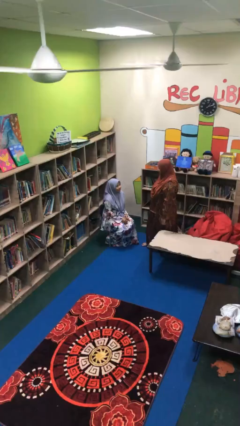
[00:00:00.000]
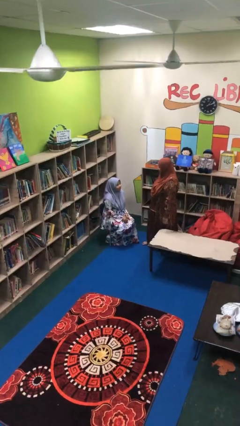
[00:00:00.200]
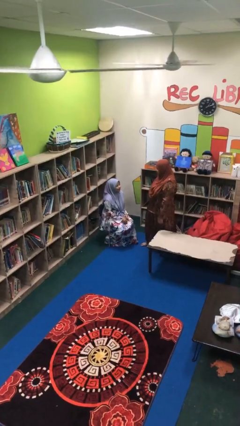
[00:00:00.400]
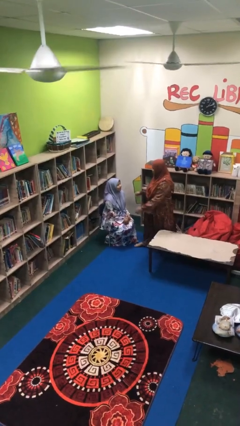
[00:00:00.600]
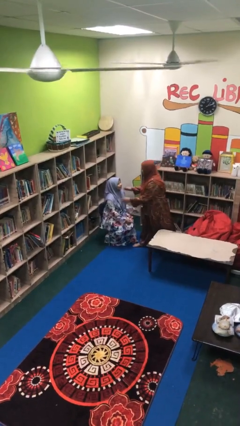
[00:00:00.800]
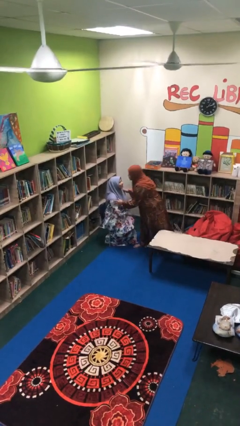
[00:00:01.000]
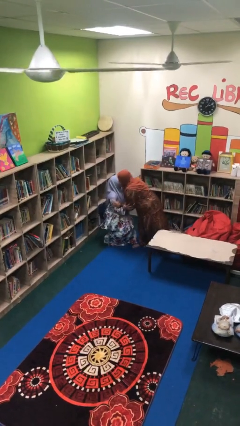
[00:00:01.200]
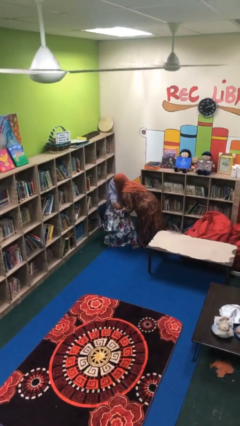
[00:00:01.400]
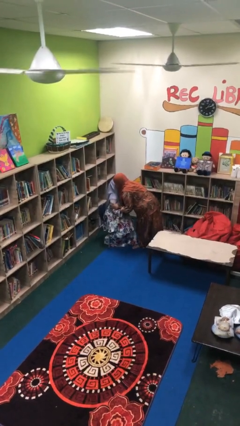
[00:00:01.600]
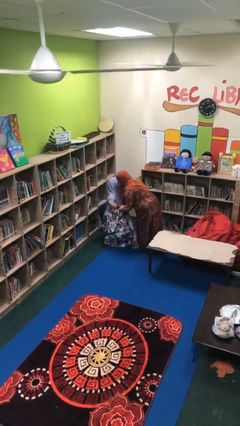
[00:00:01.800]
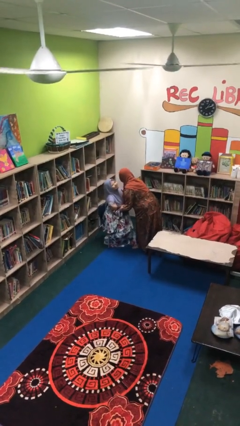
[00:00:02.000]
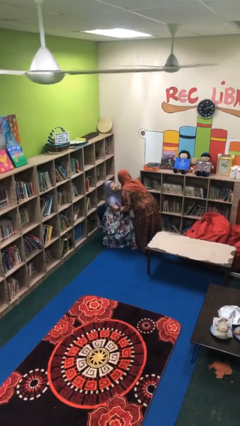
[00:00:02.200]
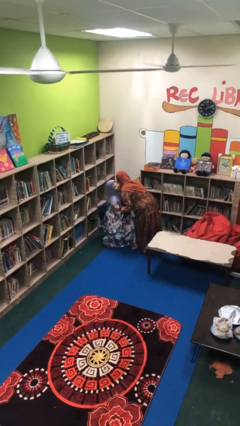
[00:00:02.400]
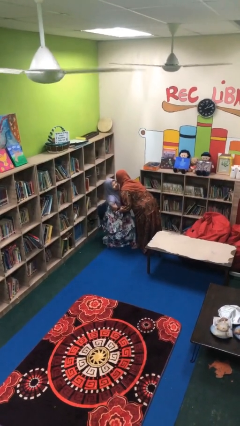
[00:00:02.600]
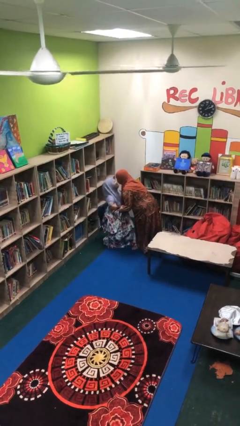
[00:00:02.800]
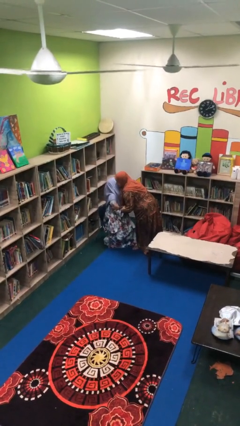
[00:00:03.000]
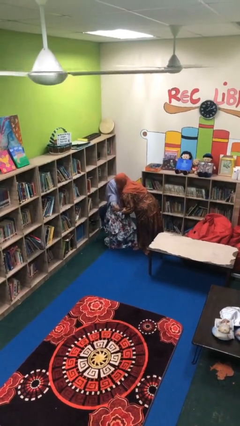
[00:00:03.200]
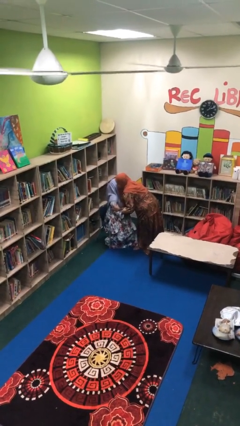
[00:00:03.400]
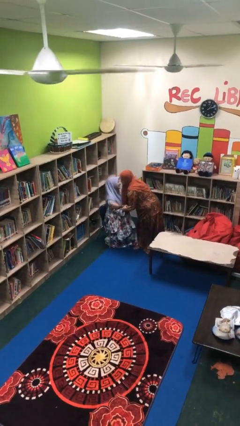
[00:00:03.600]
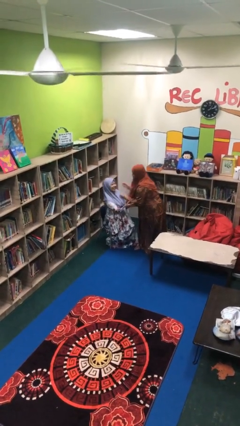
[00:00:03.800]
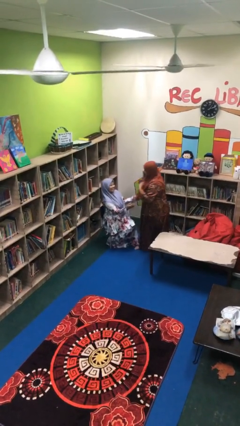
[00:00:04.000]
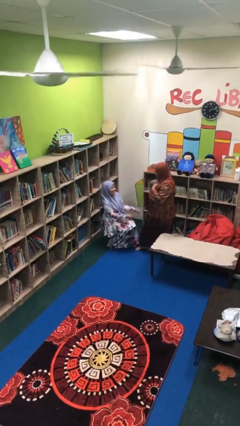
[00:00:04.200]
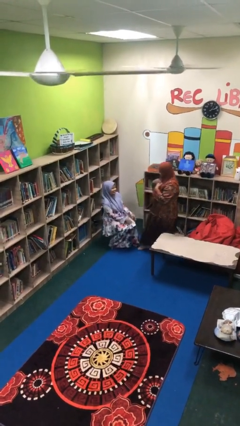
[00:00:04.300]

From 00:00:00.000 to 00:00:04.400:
person embraces person

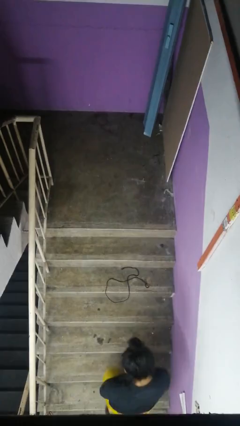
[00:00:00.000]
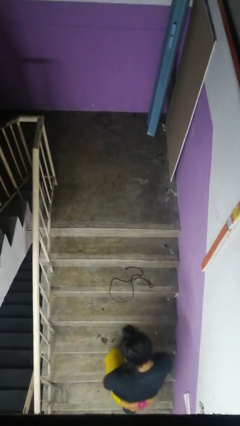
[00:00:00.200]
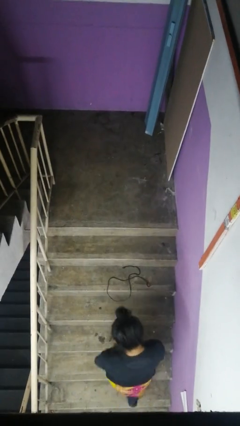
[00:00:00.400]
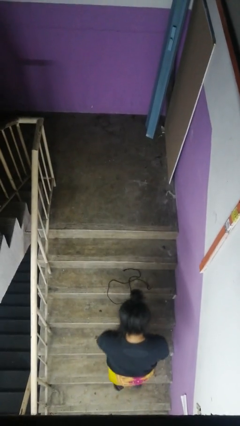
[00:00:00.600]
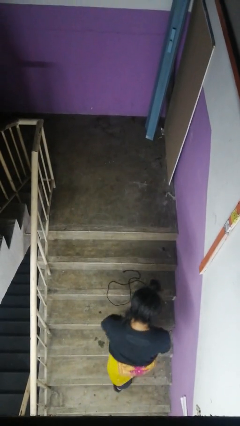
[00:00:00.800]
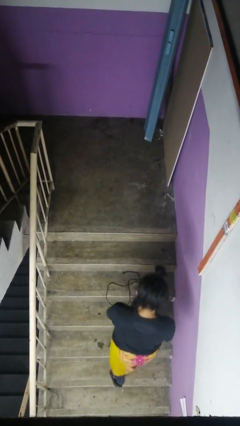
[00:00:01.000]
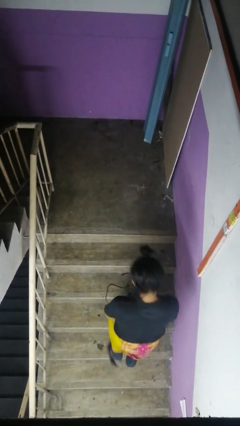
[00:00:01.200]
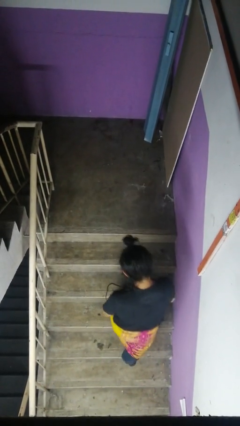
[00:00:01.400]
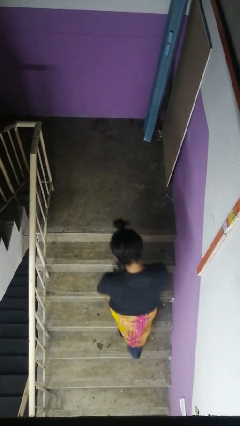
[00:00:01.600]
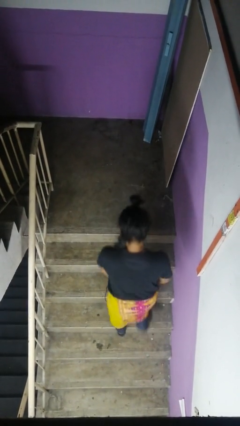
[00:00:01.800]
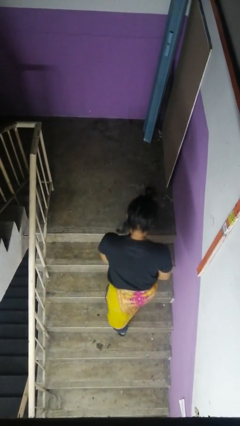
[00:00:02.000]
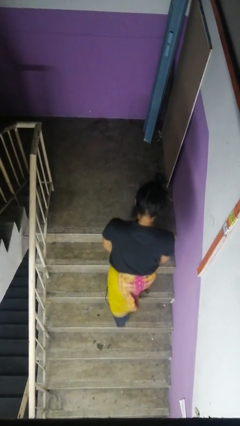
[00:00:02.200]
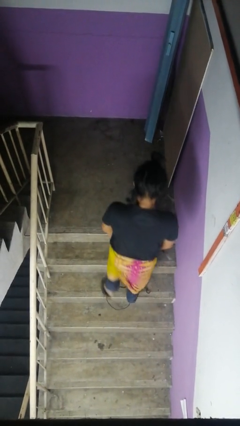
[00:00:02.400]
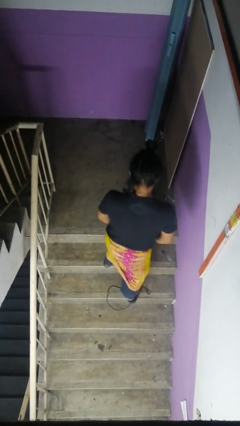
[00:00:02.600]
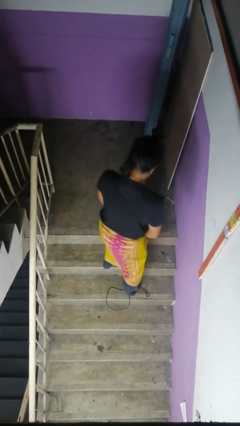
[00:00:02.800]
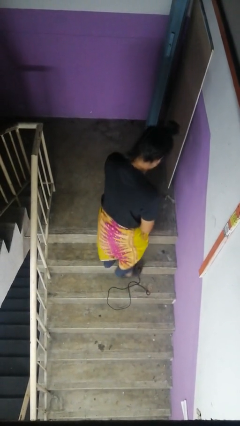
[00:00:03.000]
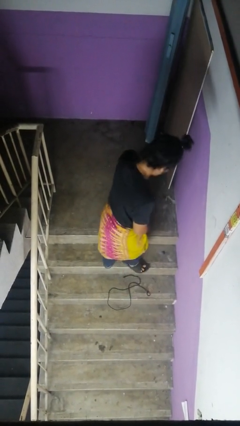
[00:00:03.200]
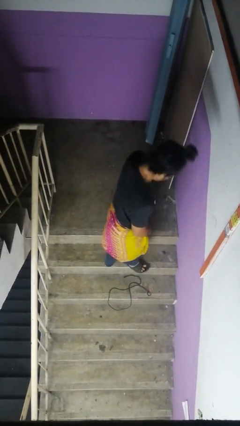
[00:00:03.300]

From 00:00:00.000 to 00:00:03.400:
person climbs up stairs

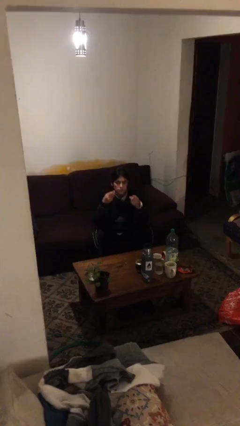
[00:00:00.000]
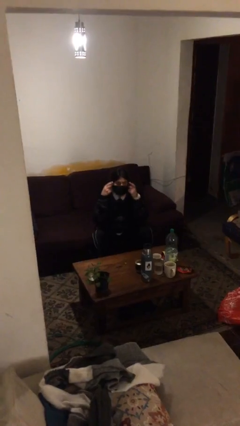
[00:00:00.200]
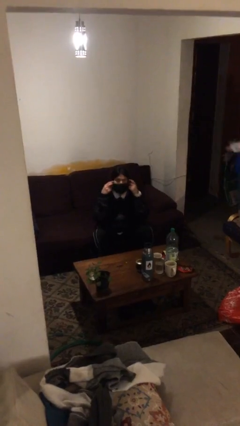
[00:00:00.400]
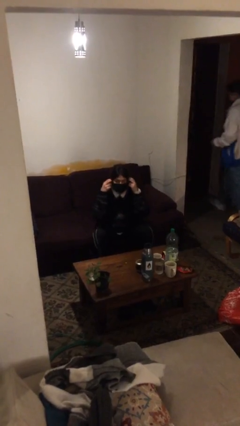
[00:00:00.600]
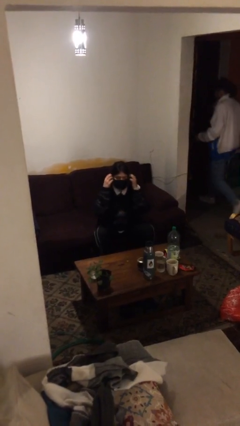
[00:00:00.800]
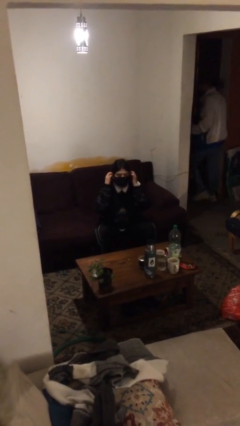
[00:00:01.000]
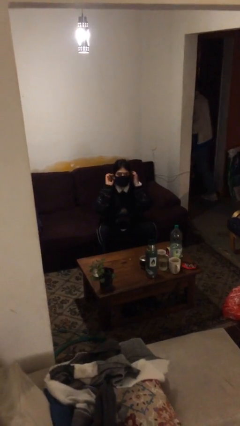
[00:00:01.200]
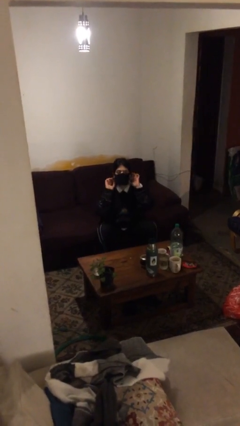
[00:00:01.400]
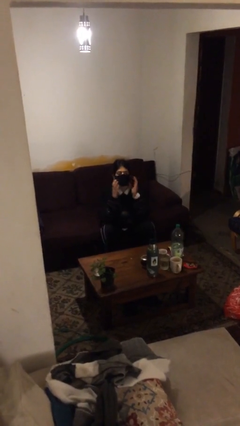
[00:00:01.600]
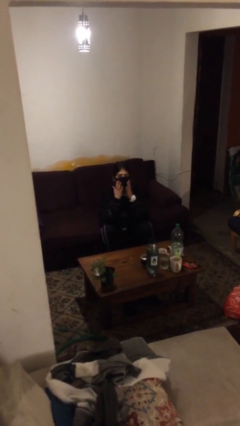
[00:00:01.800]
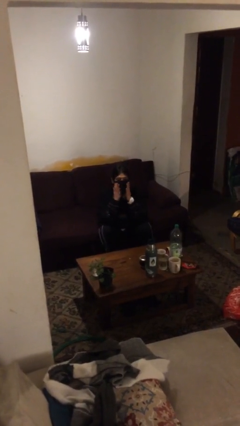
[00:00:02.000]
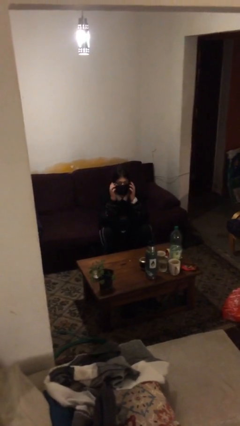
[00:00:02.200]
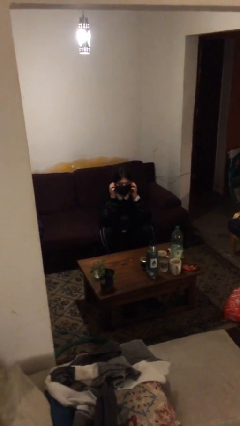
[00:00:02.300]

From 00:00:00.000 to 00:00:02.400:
person puts on facemask

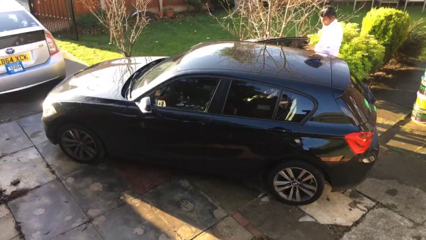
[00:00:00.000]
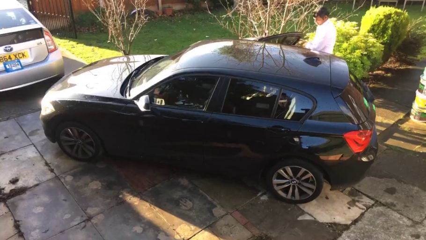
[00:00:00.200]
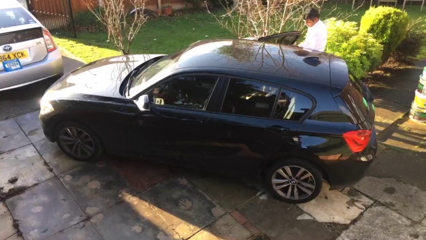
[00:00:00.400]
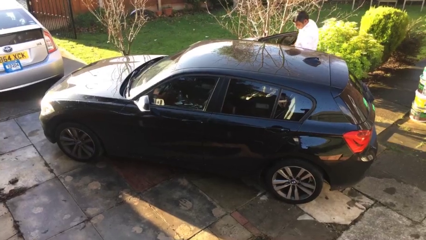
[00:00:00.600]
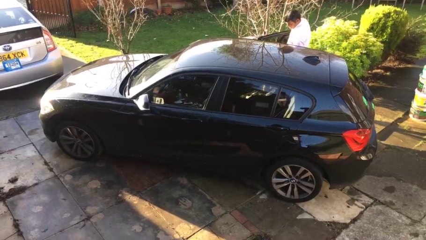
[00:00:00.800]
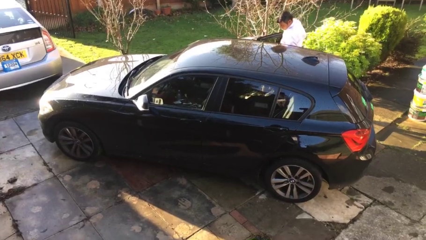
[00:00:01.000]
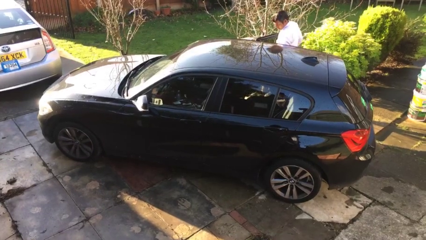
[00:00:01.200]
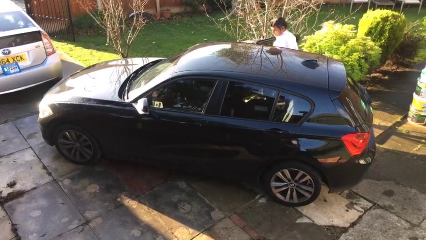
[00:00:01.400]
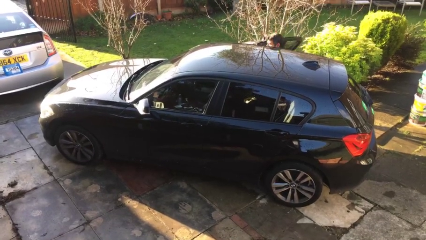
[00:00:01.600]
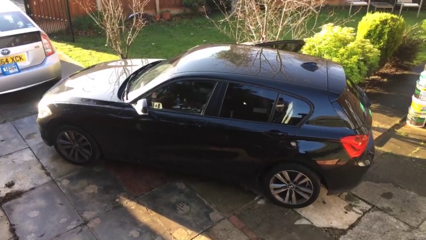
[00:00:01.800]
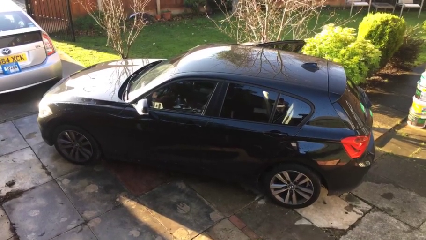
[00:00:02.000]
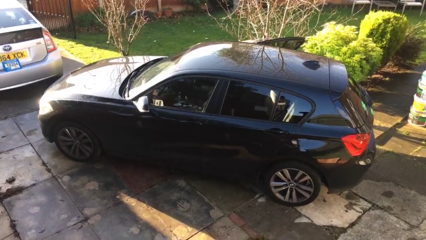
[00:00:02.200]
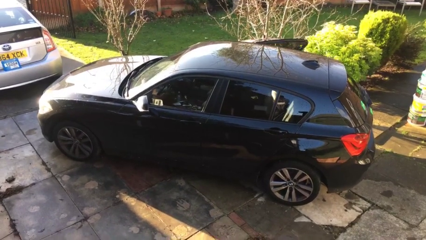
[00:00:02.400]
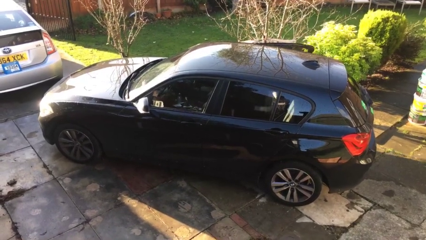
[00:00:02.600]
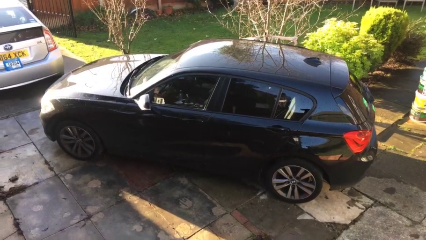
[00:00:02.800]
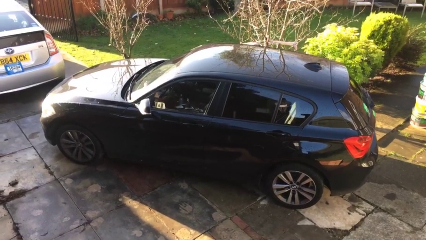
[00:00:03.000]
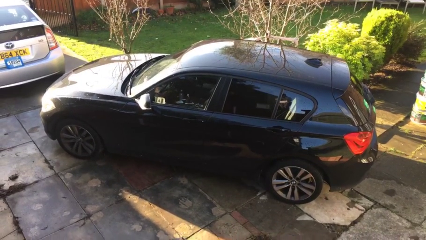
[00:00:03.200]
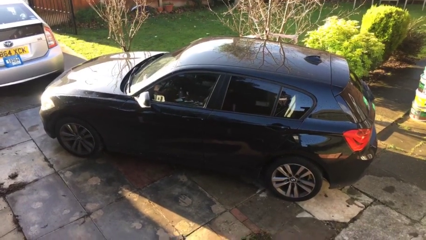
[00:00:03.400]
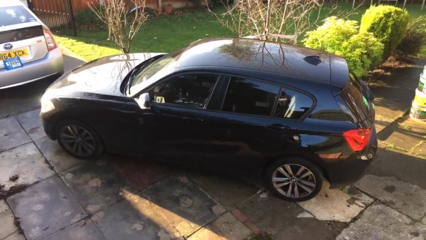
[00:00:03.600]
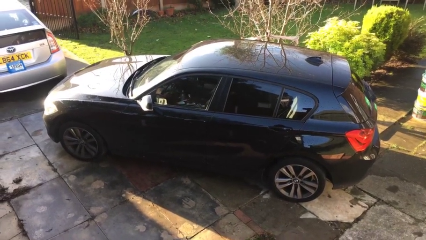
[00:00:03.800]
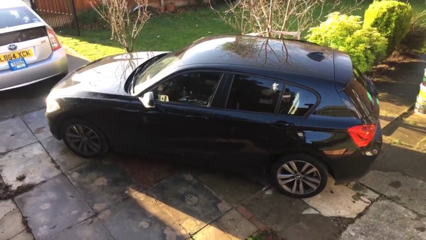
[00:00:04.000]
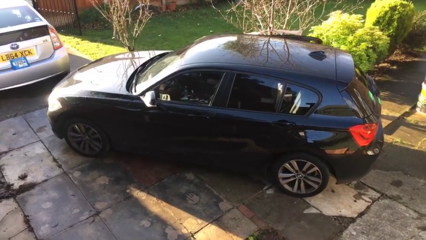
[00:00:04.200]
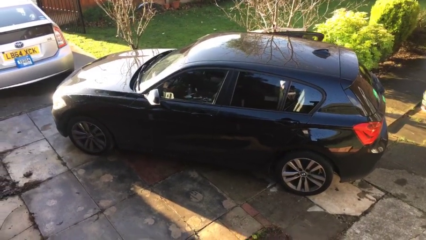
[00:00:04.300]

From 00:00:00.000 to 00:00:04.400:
car picks up person

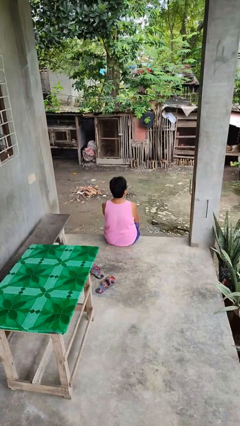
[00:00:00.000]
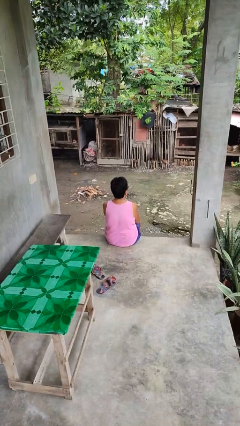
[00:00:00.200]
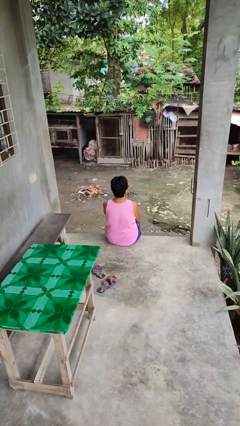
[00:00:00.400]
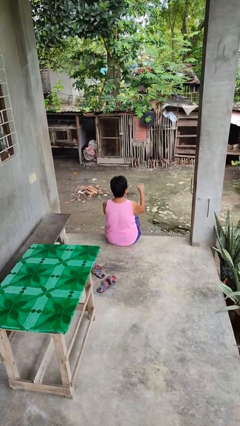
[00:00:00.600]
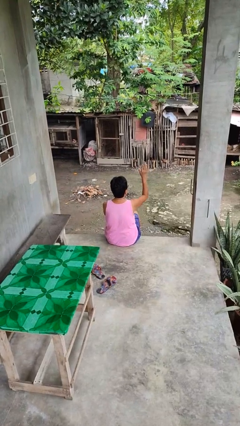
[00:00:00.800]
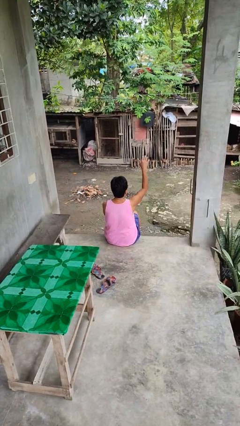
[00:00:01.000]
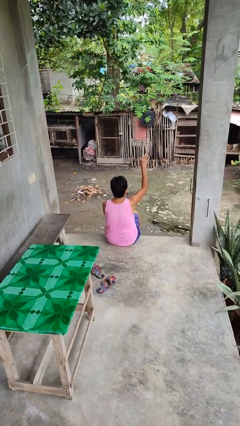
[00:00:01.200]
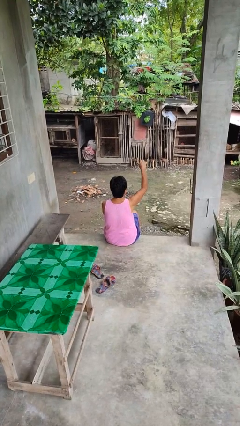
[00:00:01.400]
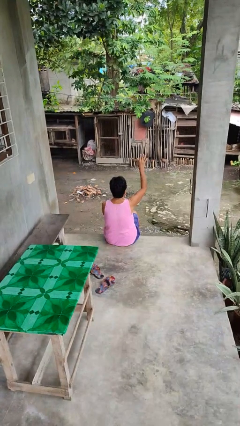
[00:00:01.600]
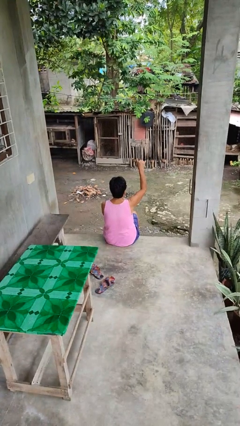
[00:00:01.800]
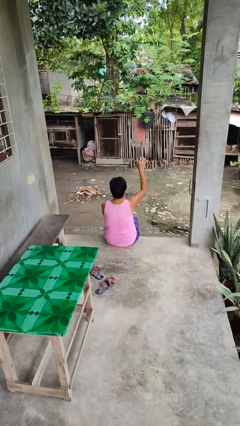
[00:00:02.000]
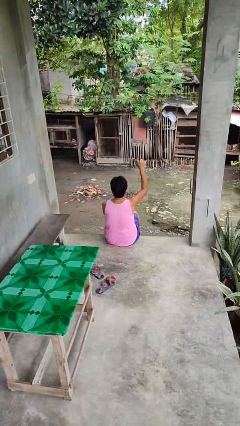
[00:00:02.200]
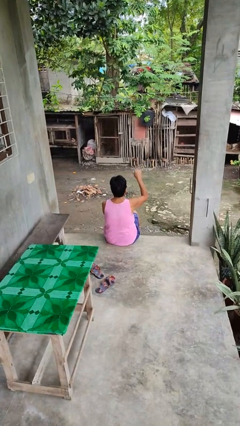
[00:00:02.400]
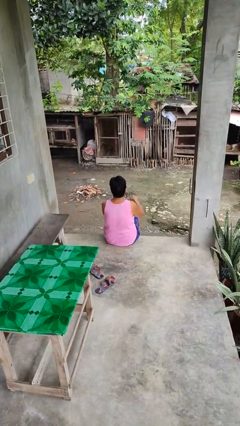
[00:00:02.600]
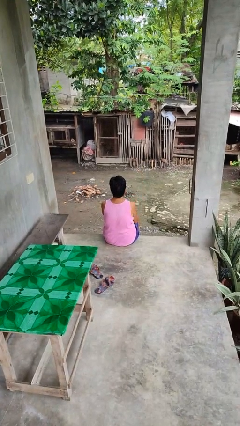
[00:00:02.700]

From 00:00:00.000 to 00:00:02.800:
person gestures come here
